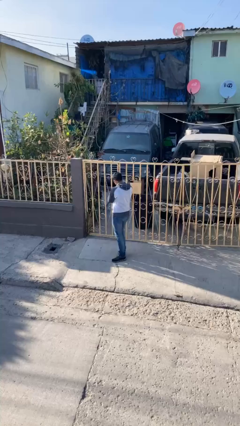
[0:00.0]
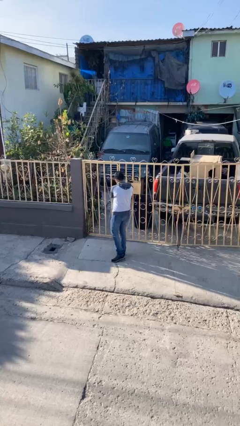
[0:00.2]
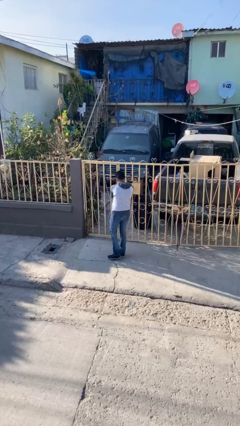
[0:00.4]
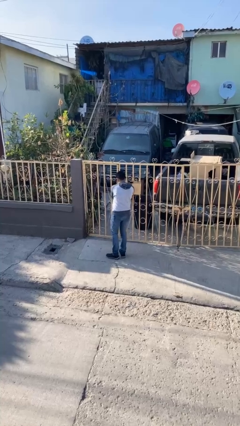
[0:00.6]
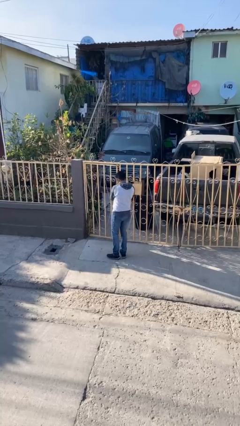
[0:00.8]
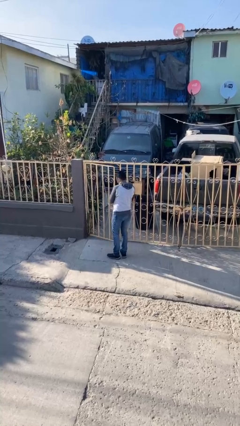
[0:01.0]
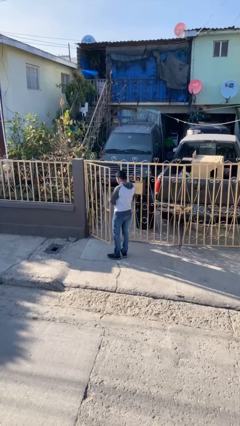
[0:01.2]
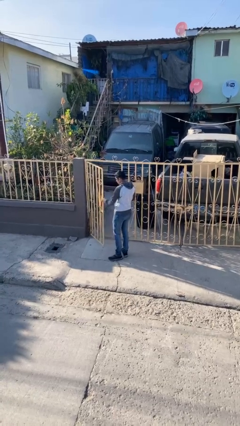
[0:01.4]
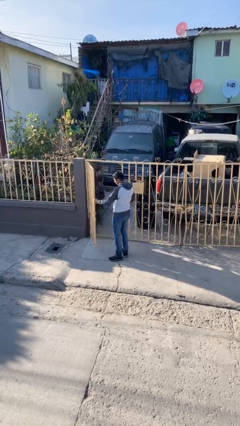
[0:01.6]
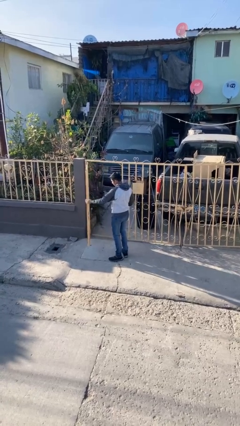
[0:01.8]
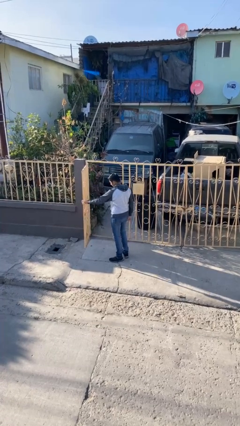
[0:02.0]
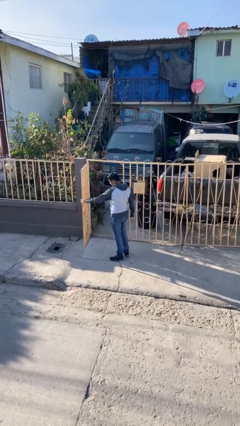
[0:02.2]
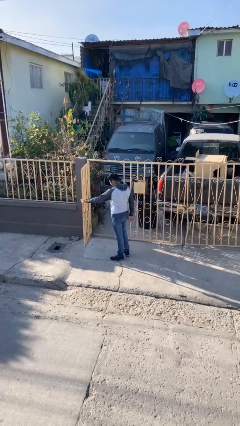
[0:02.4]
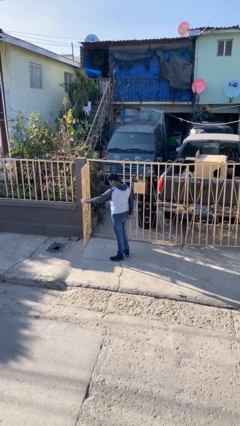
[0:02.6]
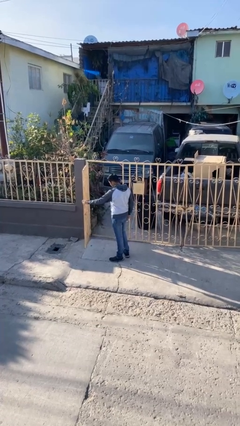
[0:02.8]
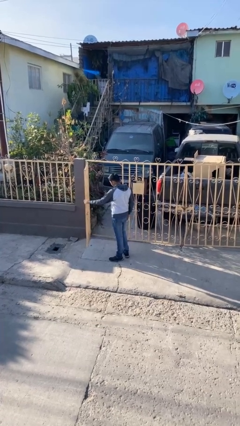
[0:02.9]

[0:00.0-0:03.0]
person opens facility door

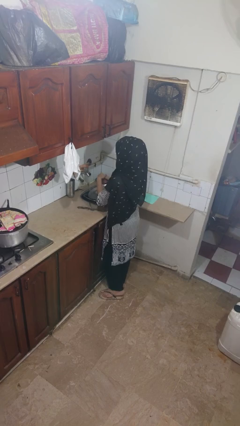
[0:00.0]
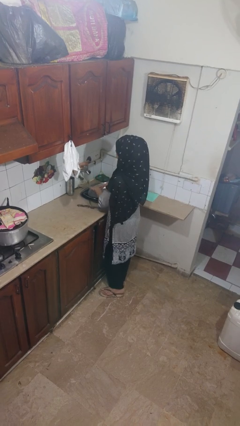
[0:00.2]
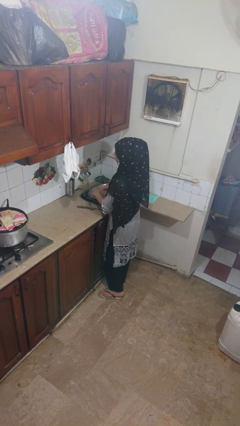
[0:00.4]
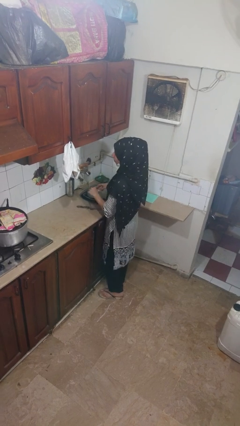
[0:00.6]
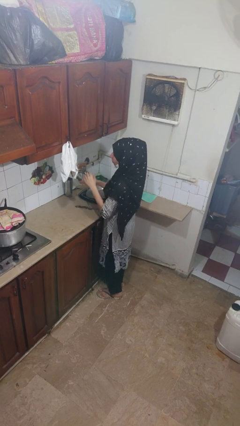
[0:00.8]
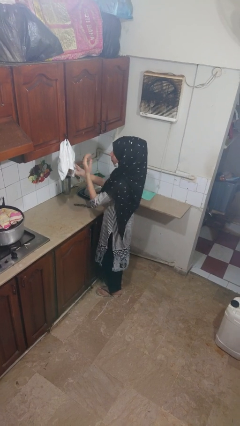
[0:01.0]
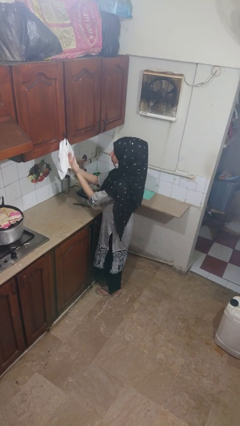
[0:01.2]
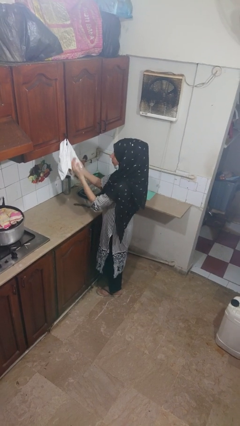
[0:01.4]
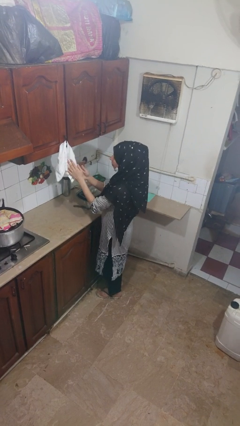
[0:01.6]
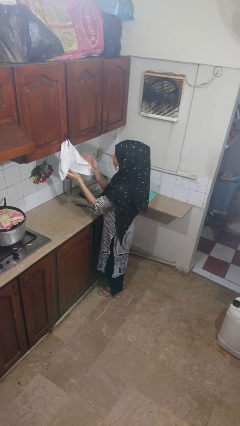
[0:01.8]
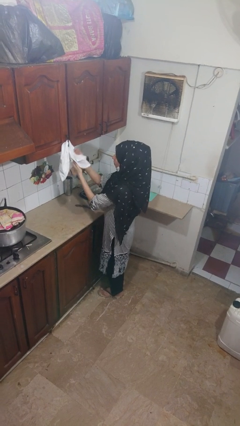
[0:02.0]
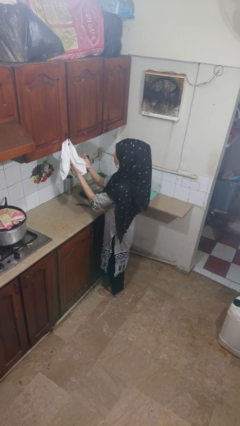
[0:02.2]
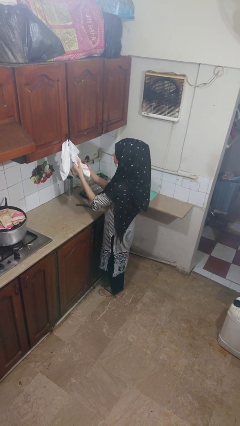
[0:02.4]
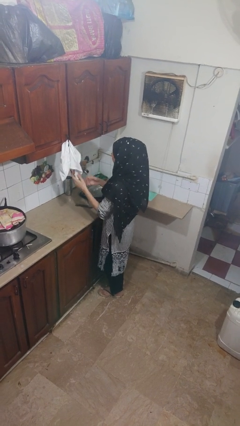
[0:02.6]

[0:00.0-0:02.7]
person dries hands with towel

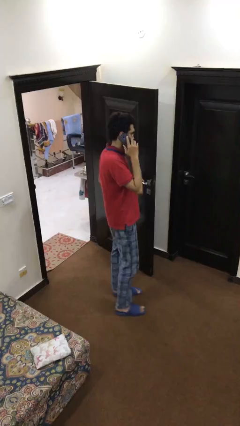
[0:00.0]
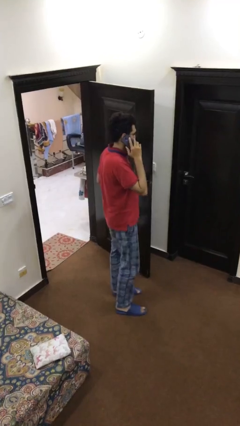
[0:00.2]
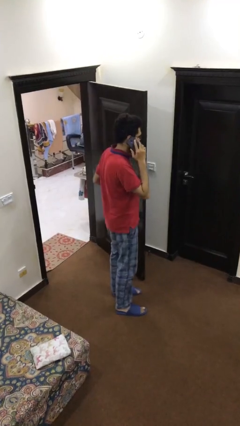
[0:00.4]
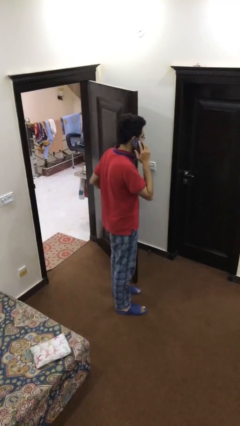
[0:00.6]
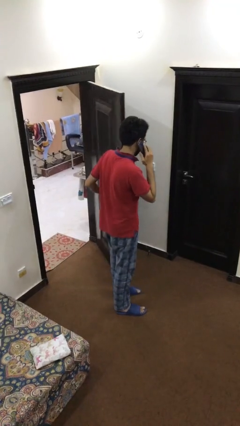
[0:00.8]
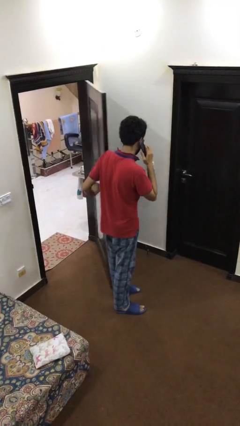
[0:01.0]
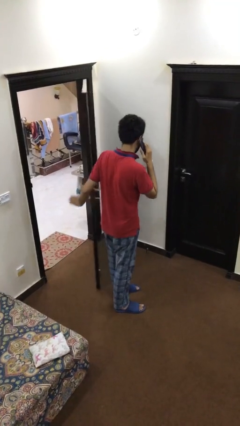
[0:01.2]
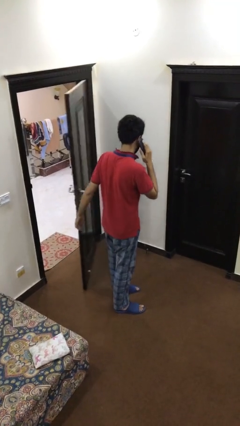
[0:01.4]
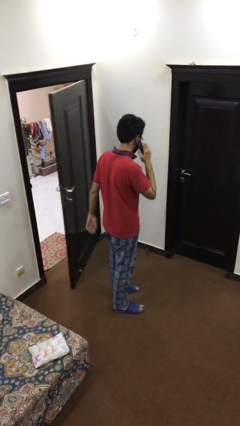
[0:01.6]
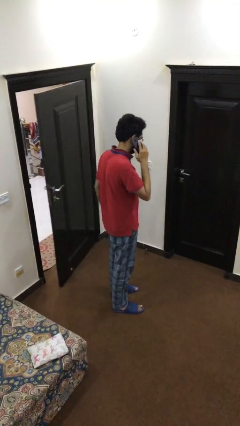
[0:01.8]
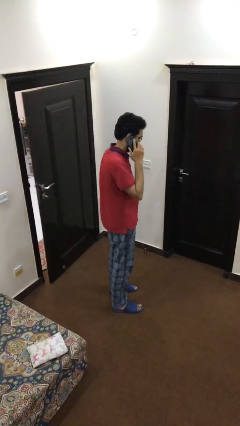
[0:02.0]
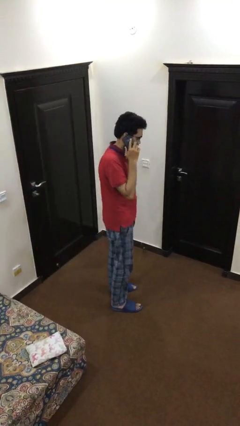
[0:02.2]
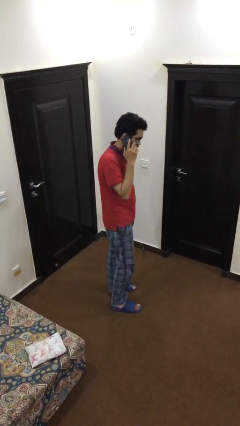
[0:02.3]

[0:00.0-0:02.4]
person closes facility door

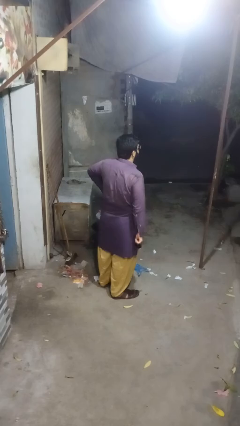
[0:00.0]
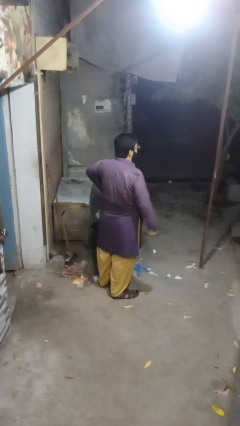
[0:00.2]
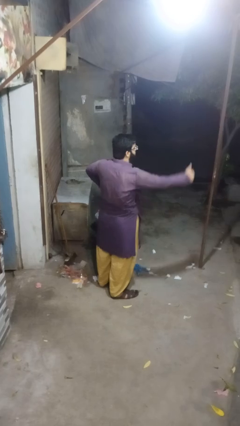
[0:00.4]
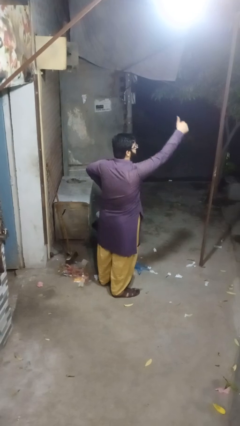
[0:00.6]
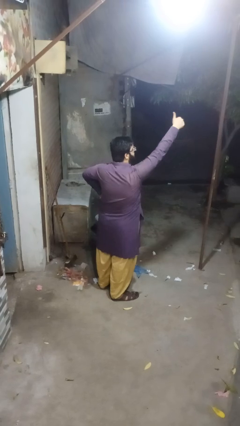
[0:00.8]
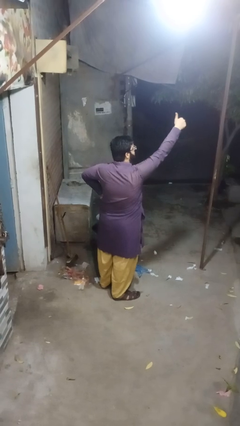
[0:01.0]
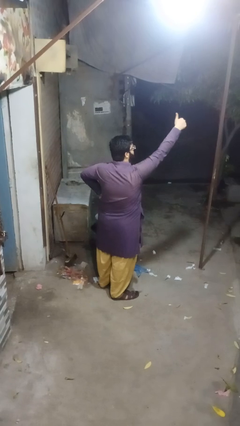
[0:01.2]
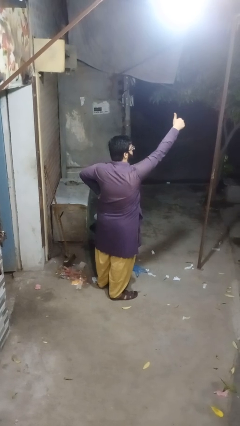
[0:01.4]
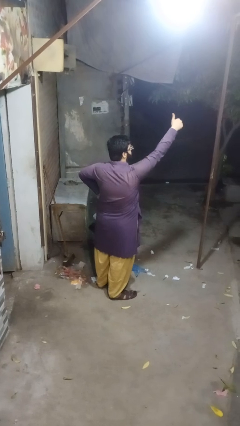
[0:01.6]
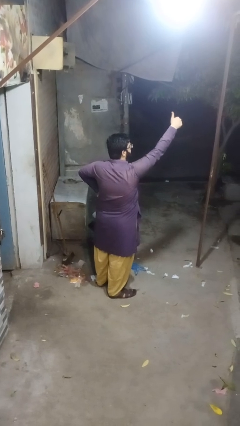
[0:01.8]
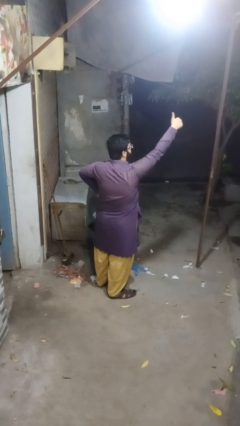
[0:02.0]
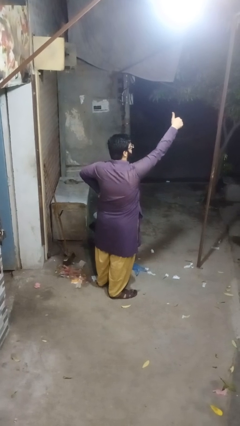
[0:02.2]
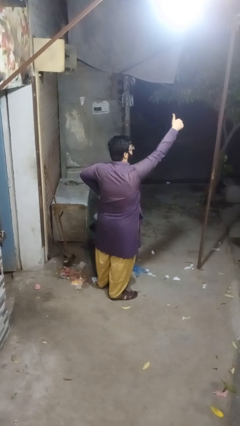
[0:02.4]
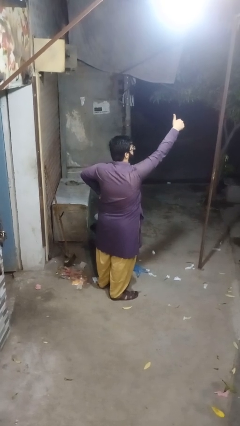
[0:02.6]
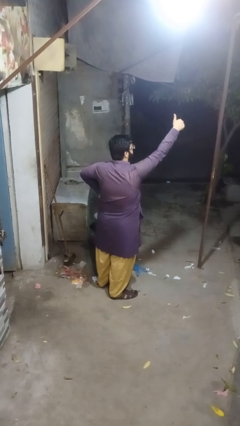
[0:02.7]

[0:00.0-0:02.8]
person gestures thumbs up

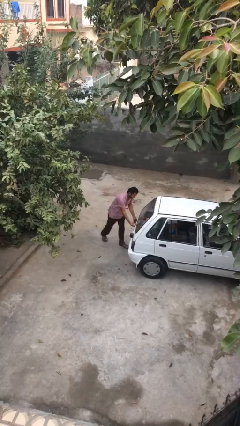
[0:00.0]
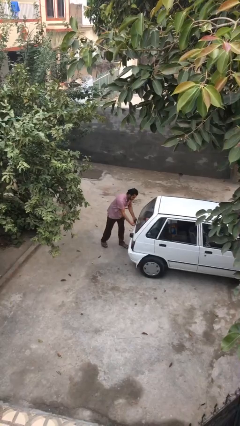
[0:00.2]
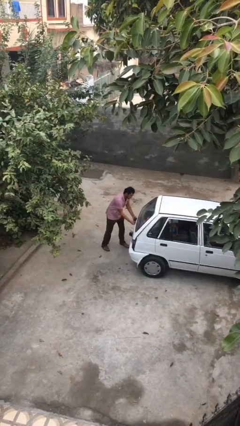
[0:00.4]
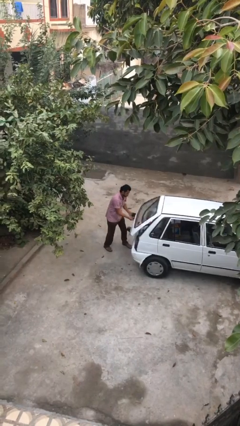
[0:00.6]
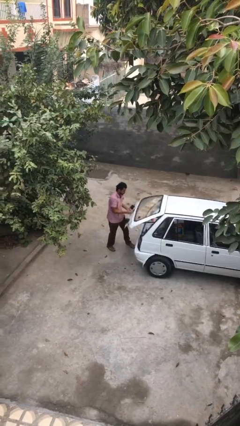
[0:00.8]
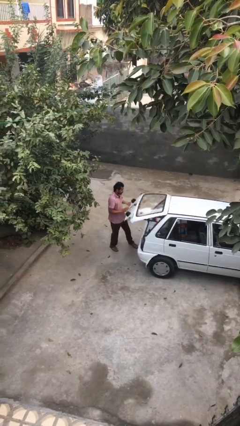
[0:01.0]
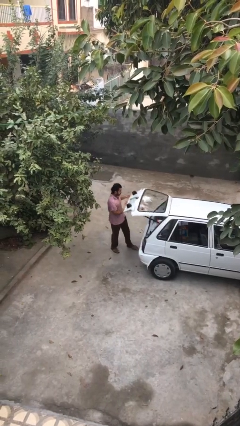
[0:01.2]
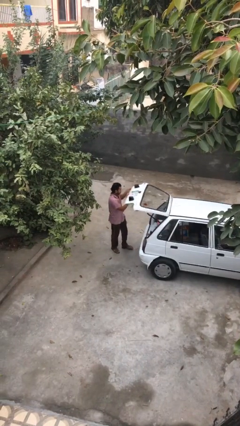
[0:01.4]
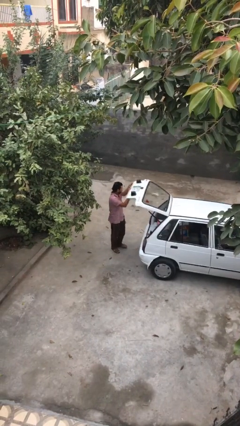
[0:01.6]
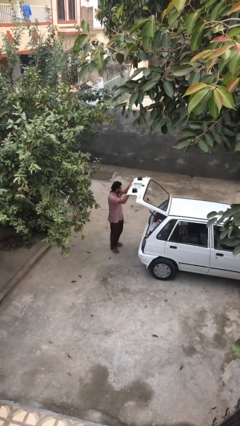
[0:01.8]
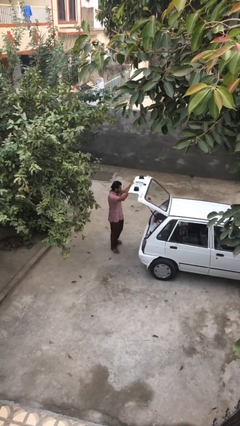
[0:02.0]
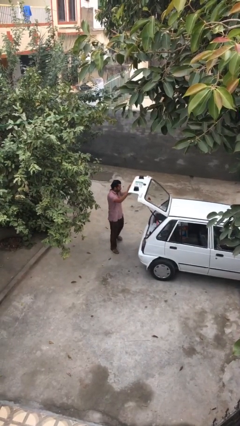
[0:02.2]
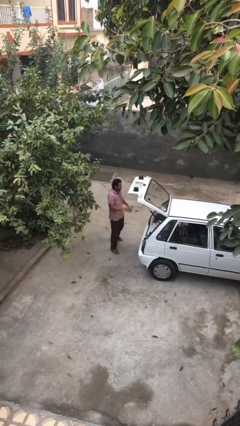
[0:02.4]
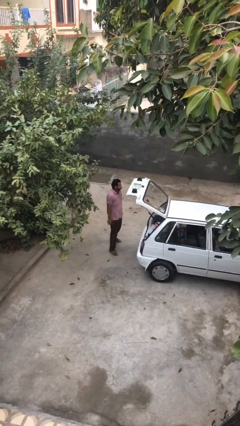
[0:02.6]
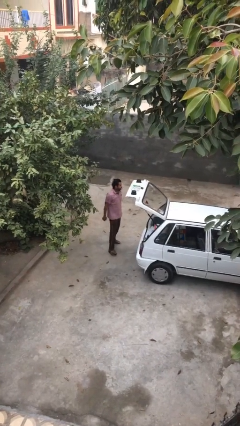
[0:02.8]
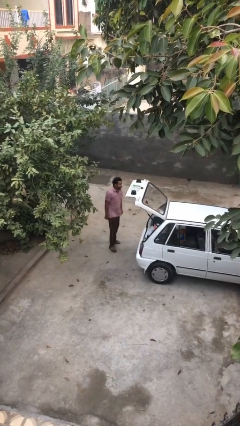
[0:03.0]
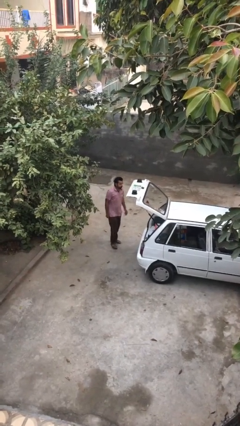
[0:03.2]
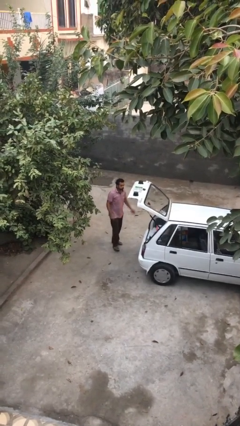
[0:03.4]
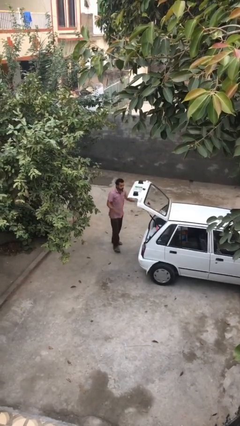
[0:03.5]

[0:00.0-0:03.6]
person opens car trunk

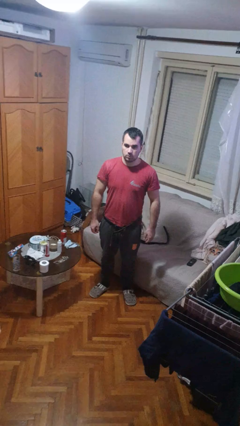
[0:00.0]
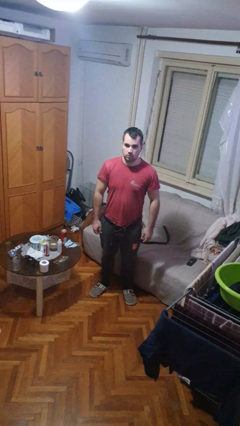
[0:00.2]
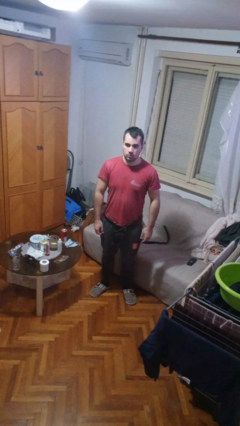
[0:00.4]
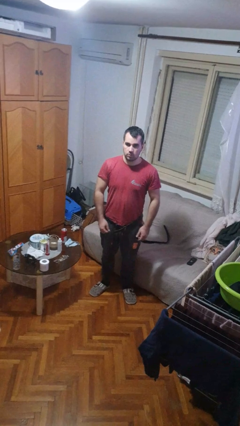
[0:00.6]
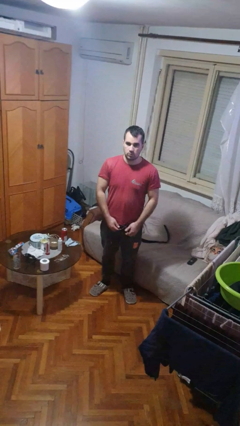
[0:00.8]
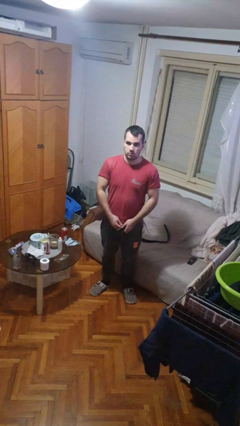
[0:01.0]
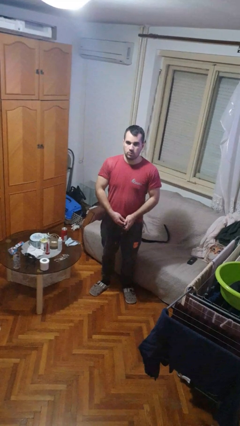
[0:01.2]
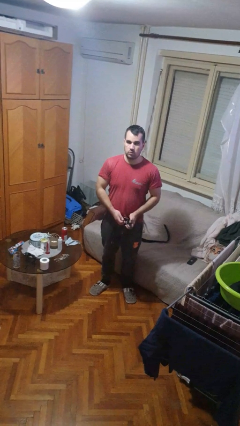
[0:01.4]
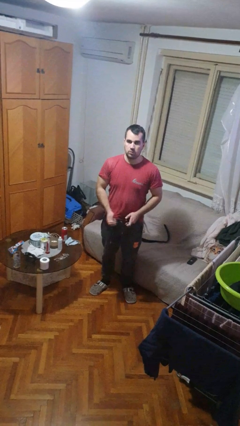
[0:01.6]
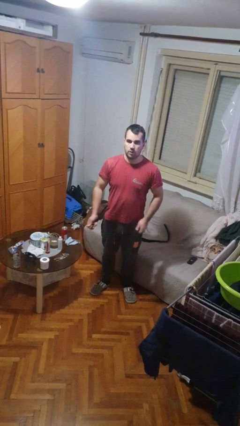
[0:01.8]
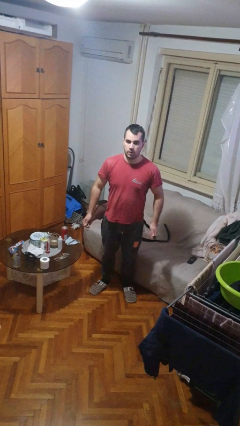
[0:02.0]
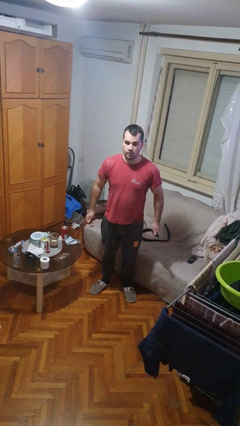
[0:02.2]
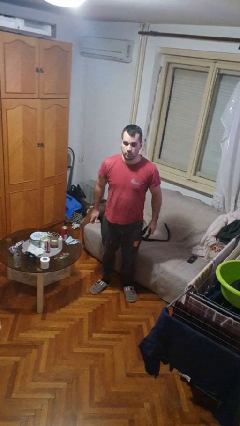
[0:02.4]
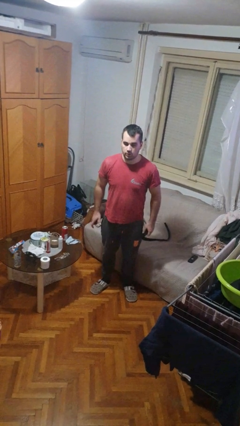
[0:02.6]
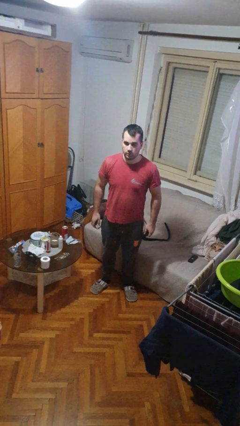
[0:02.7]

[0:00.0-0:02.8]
person takes off belt

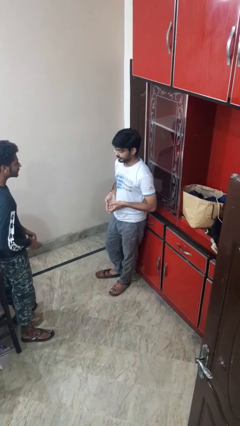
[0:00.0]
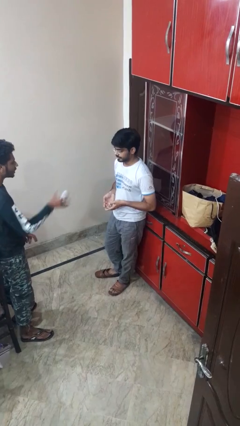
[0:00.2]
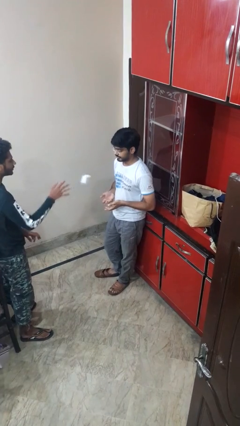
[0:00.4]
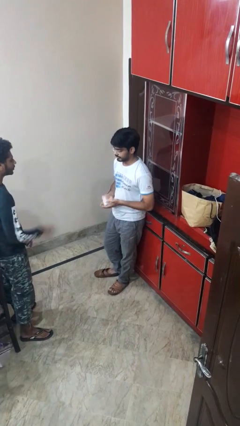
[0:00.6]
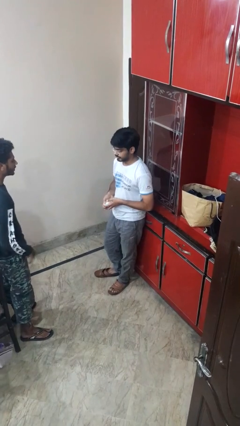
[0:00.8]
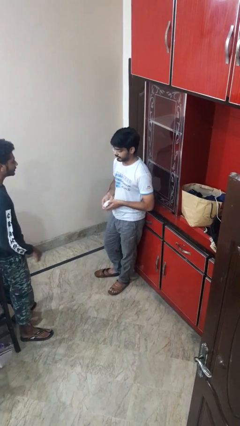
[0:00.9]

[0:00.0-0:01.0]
person catches object from person
